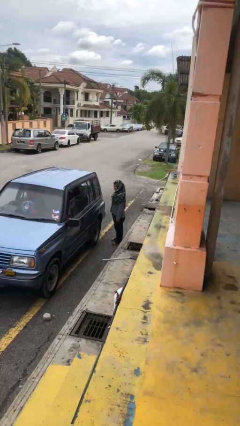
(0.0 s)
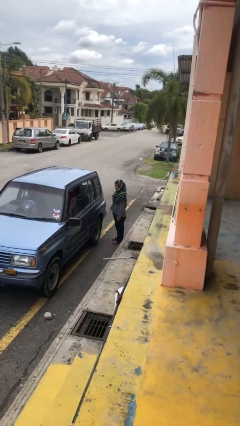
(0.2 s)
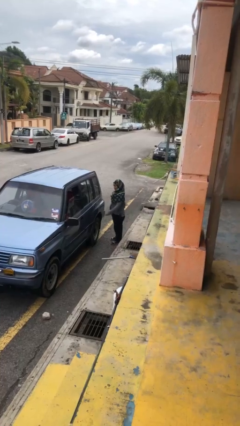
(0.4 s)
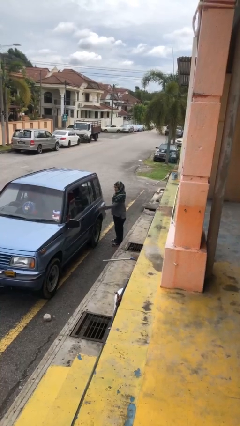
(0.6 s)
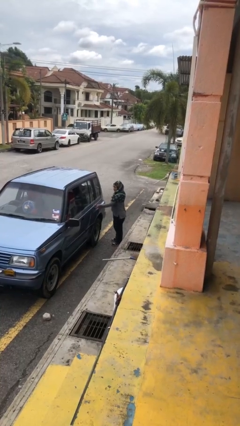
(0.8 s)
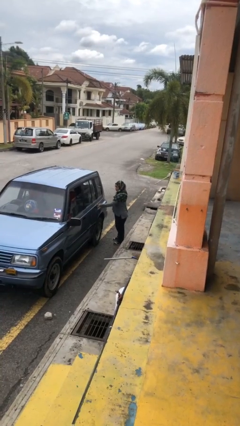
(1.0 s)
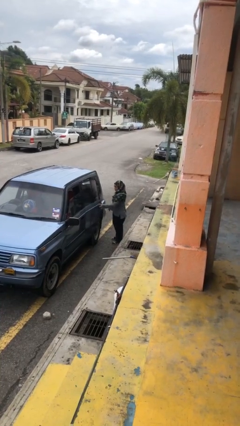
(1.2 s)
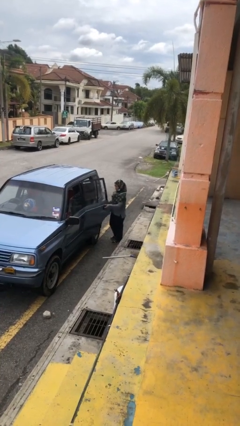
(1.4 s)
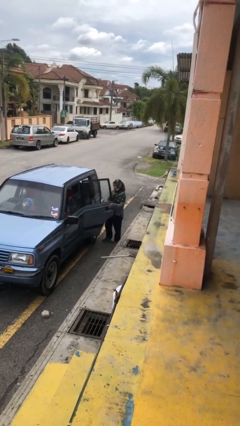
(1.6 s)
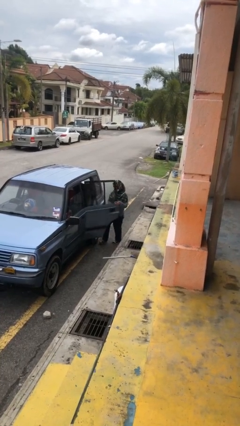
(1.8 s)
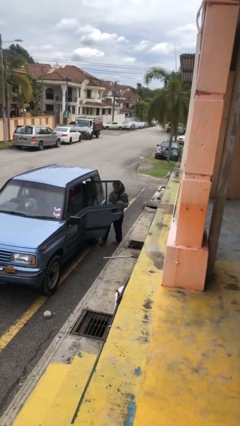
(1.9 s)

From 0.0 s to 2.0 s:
person opens car door

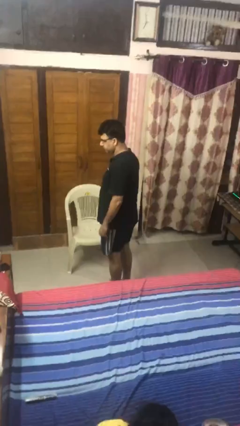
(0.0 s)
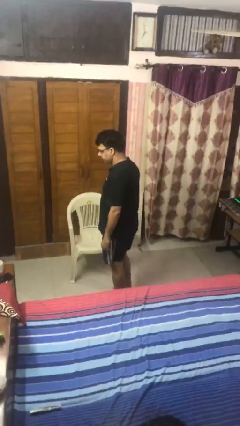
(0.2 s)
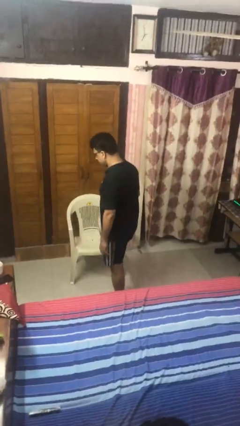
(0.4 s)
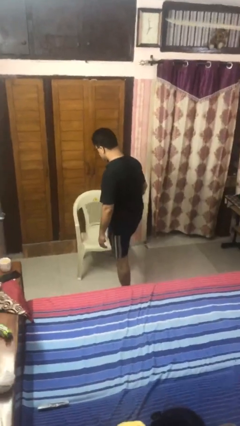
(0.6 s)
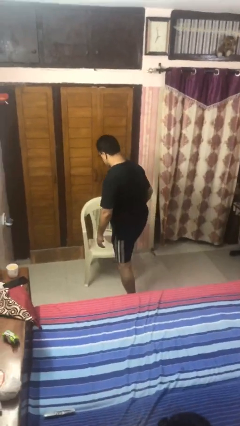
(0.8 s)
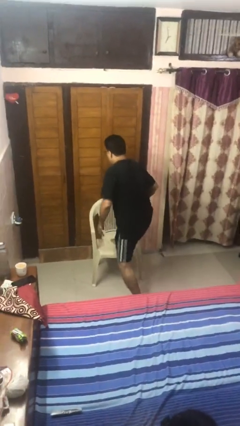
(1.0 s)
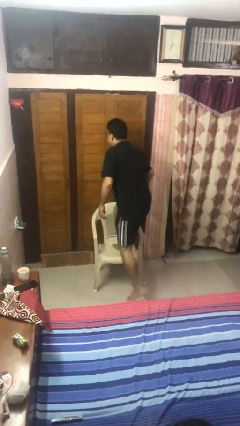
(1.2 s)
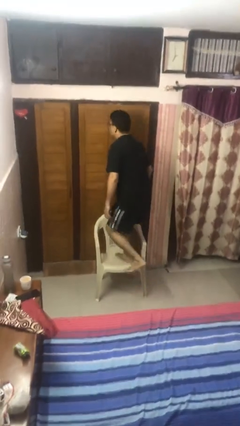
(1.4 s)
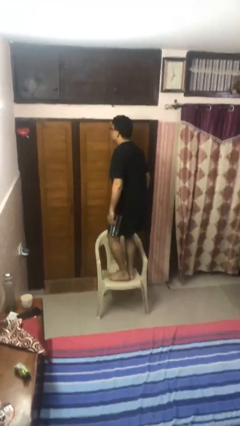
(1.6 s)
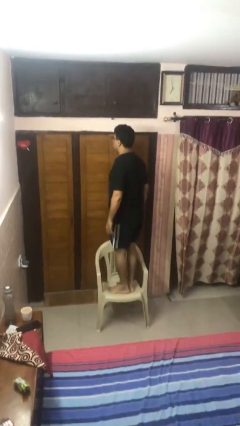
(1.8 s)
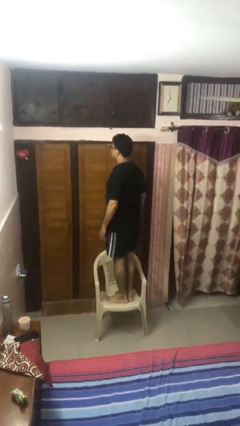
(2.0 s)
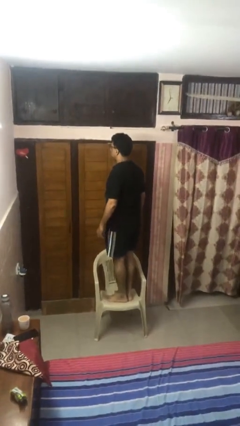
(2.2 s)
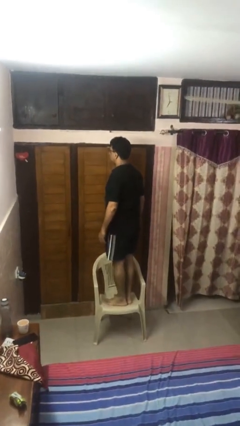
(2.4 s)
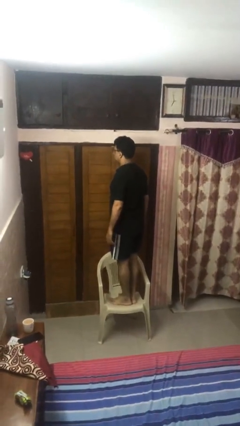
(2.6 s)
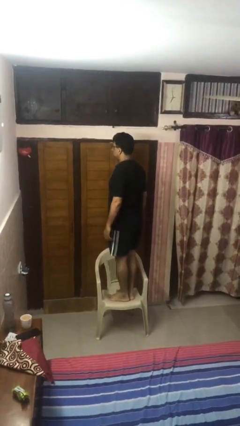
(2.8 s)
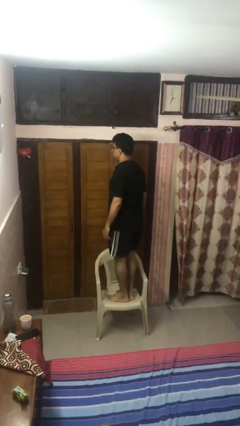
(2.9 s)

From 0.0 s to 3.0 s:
person climbs on chair

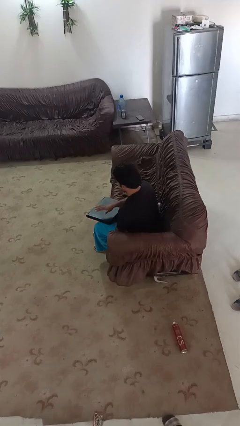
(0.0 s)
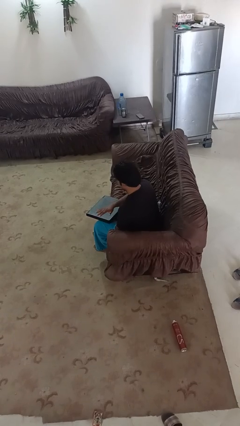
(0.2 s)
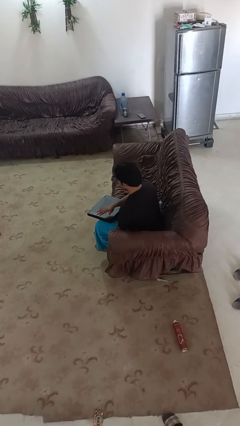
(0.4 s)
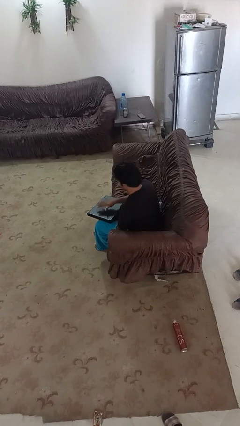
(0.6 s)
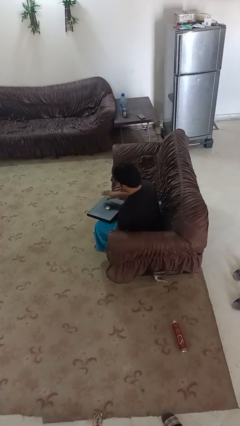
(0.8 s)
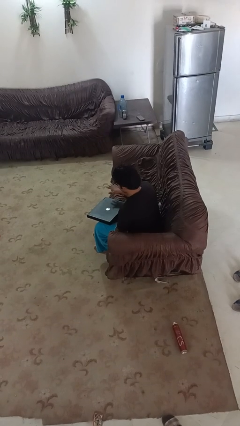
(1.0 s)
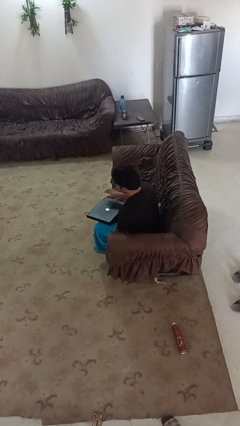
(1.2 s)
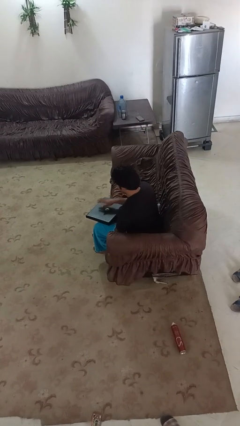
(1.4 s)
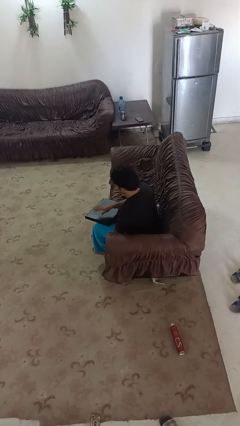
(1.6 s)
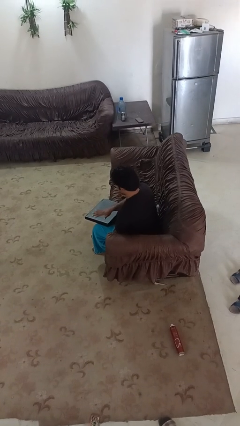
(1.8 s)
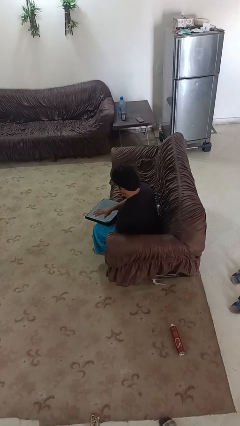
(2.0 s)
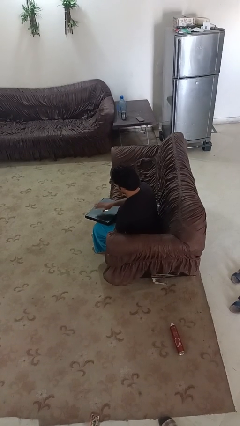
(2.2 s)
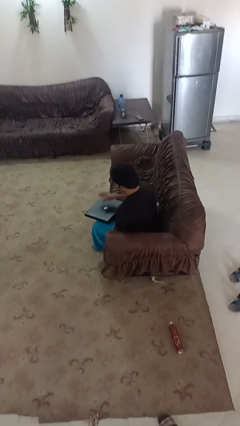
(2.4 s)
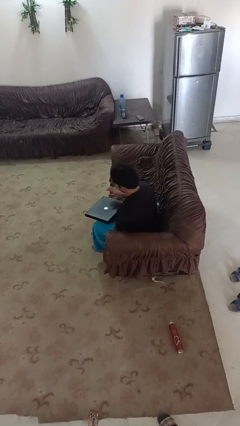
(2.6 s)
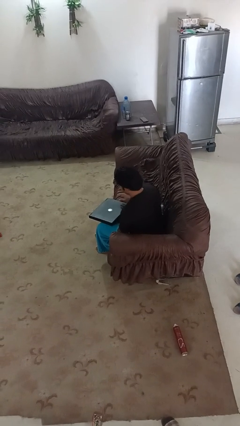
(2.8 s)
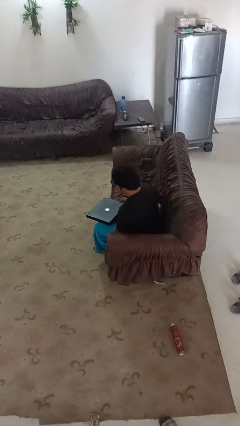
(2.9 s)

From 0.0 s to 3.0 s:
person waves hand over object

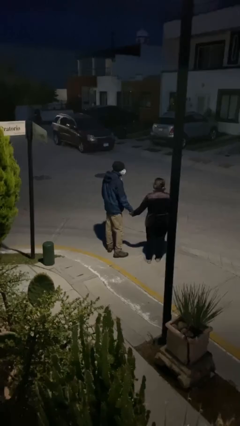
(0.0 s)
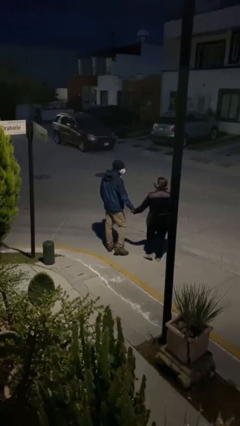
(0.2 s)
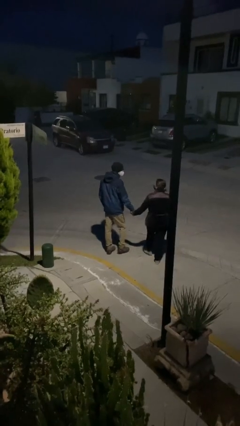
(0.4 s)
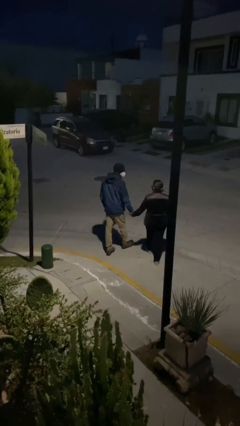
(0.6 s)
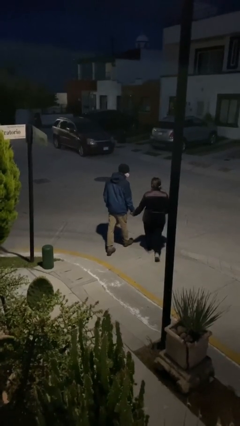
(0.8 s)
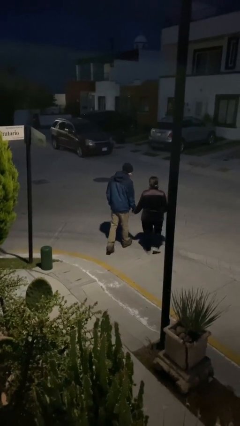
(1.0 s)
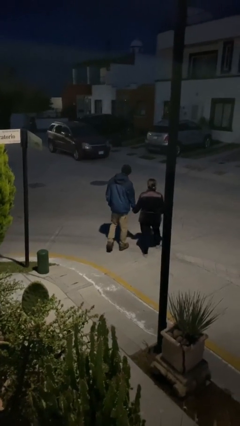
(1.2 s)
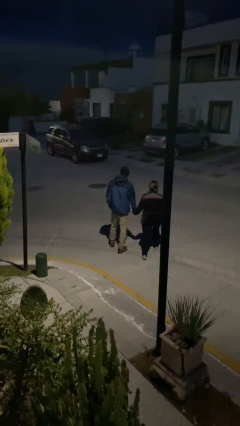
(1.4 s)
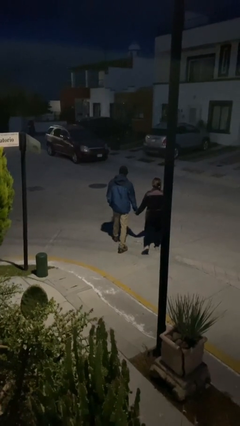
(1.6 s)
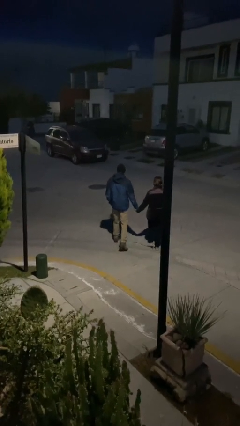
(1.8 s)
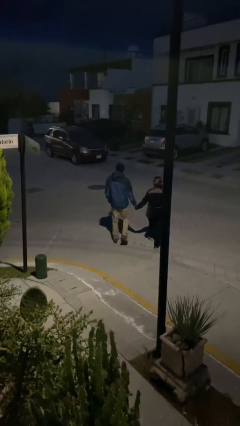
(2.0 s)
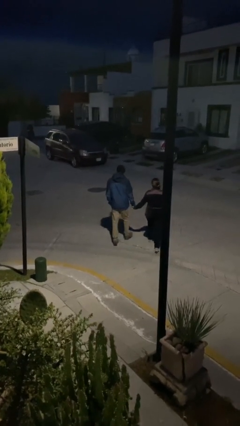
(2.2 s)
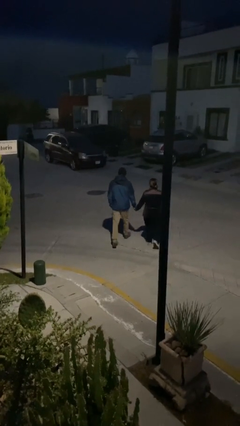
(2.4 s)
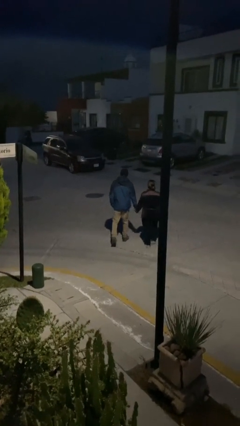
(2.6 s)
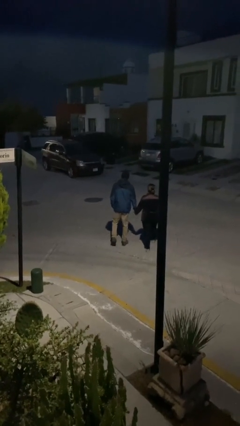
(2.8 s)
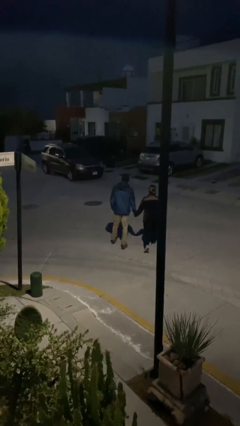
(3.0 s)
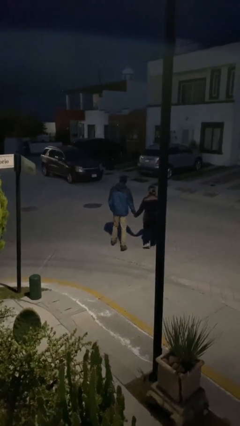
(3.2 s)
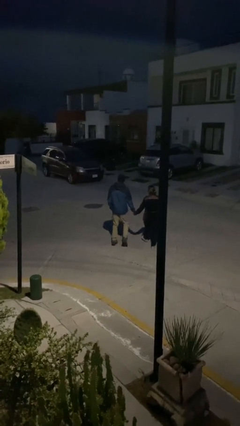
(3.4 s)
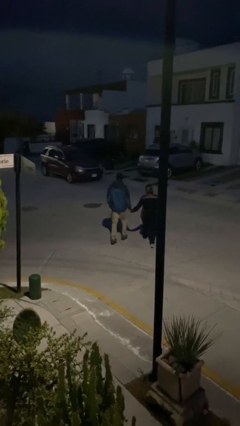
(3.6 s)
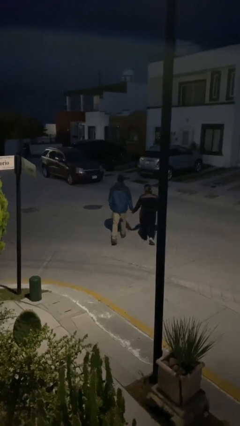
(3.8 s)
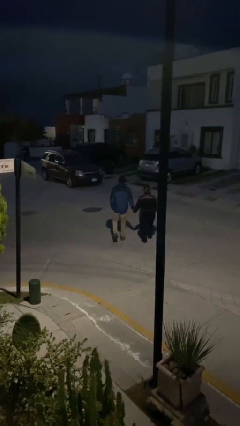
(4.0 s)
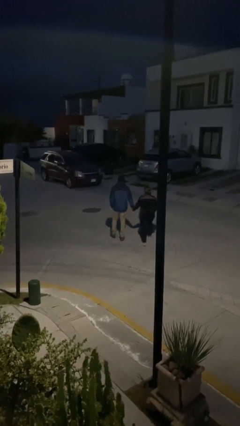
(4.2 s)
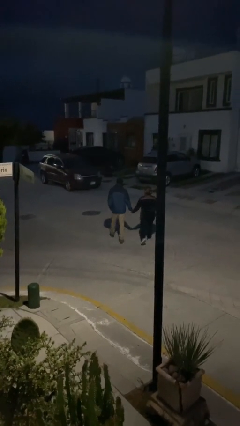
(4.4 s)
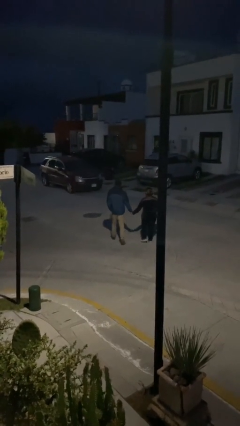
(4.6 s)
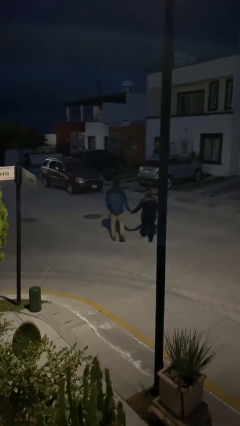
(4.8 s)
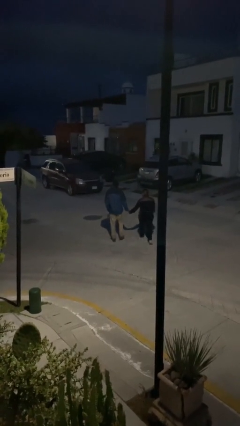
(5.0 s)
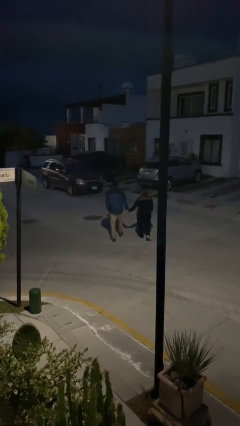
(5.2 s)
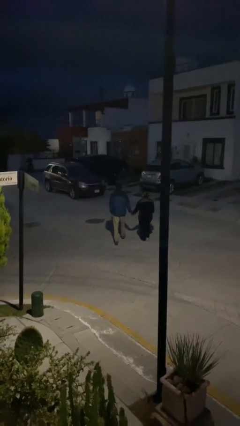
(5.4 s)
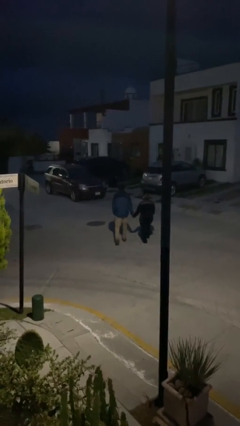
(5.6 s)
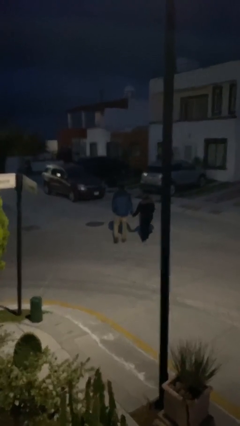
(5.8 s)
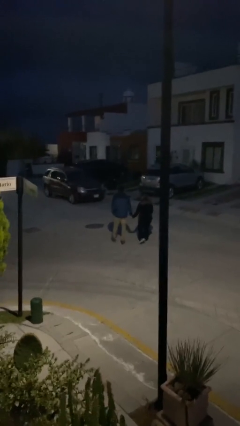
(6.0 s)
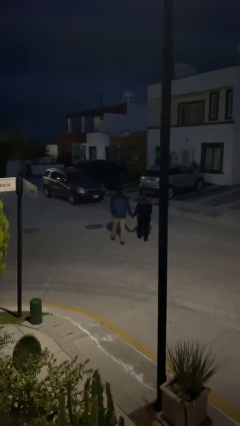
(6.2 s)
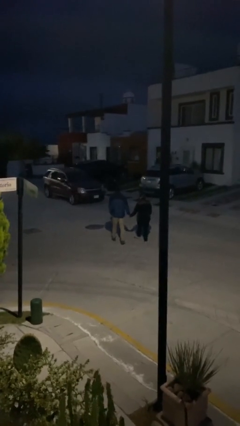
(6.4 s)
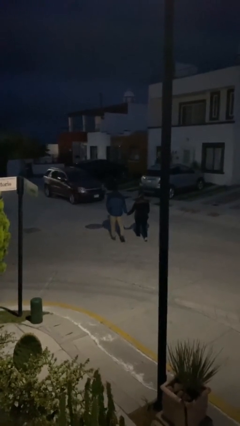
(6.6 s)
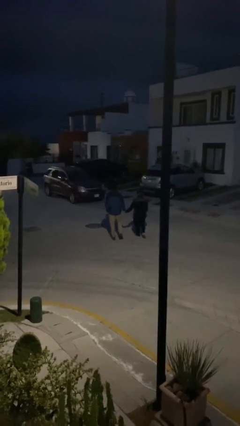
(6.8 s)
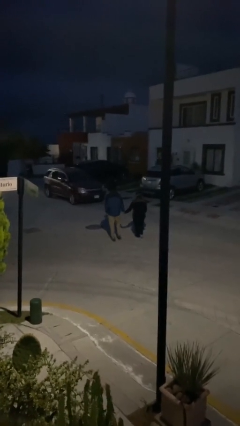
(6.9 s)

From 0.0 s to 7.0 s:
person holds hand

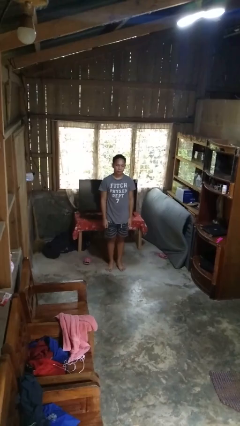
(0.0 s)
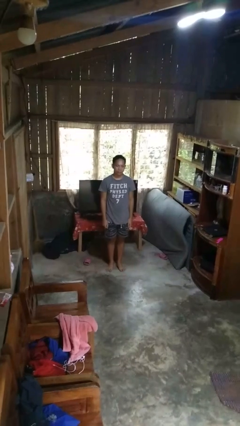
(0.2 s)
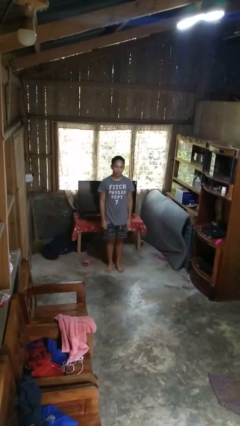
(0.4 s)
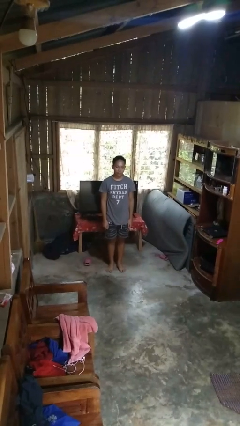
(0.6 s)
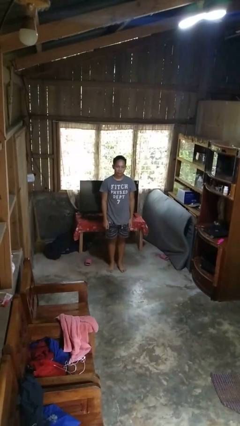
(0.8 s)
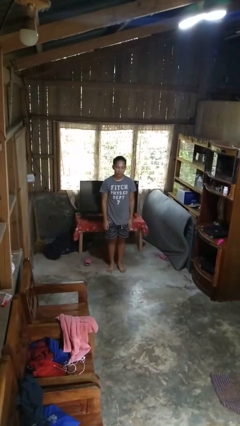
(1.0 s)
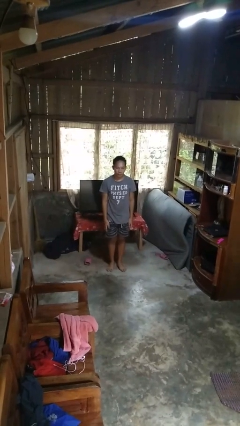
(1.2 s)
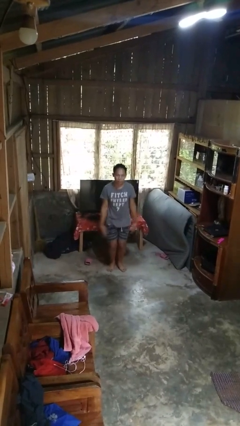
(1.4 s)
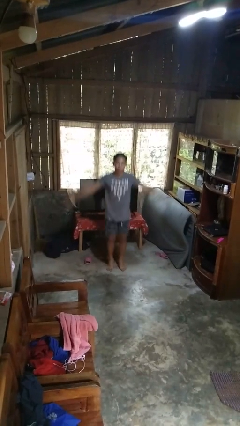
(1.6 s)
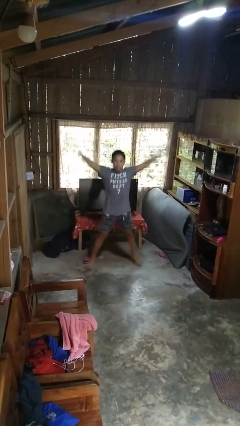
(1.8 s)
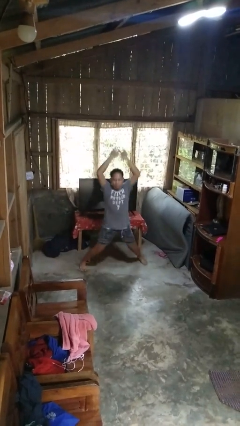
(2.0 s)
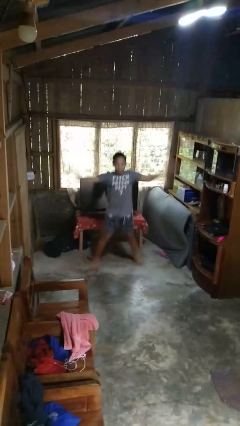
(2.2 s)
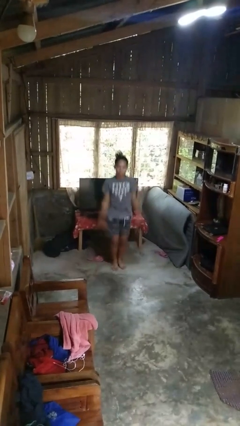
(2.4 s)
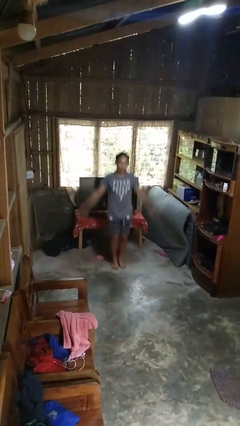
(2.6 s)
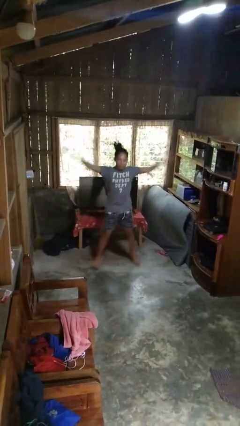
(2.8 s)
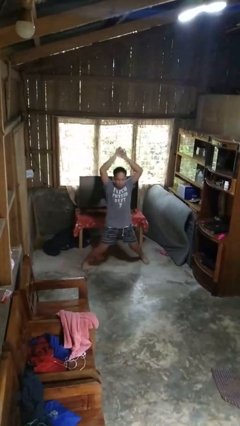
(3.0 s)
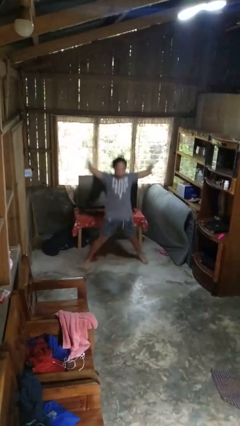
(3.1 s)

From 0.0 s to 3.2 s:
person exercises with jumping jacks
